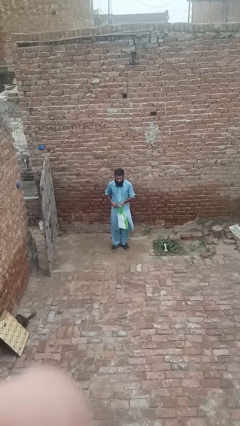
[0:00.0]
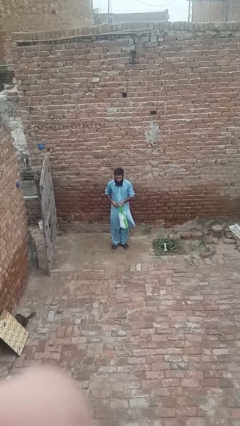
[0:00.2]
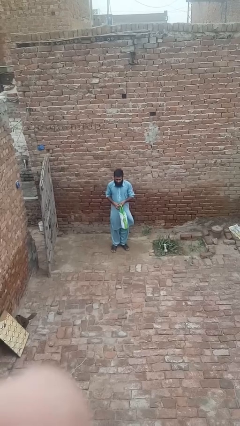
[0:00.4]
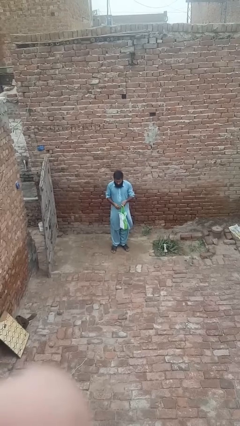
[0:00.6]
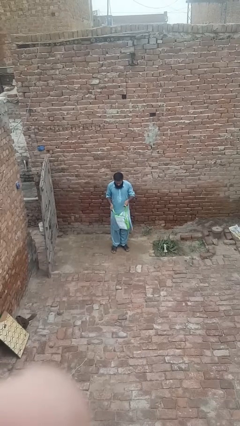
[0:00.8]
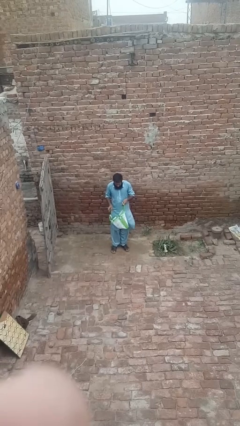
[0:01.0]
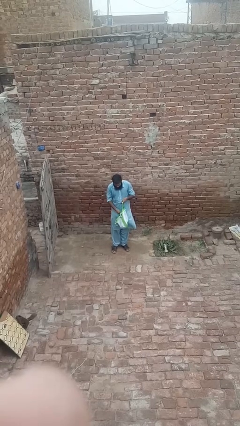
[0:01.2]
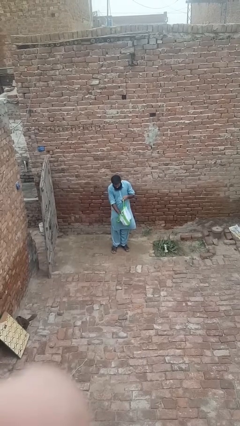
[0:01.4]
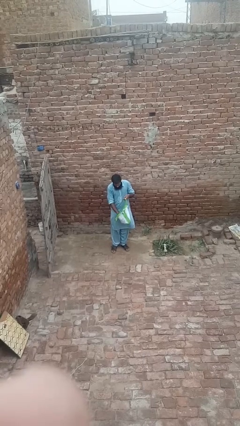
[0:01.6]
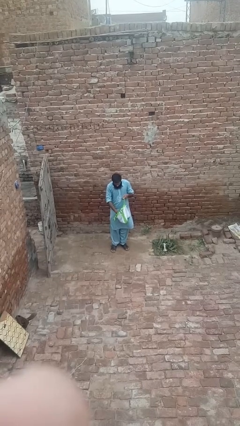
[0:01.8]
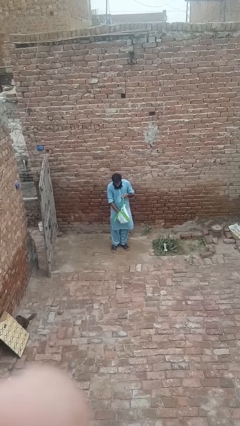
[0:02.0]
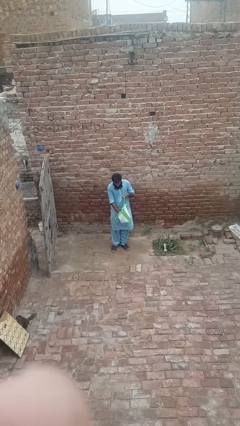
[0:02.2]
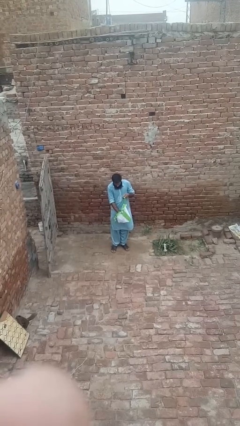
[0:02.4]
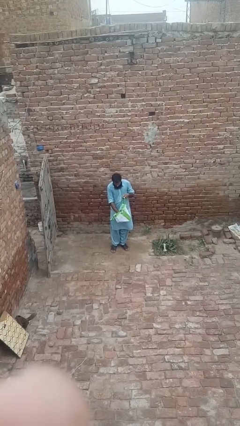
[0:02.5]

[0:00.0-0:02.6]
person searches in bag

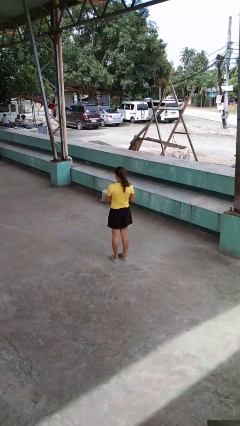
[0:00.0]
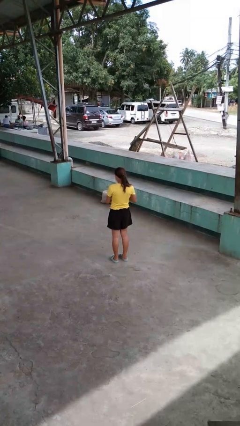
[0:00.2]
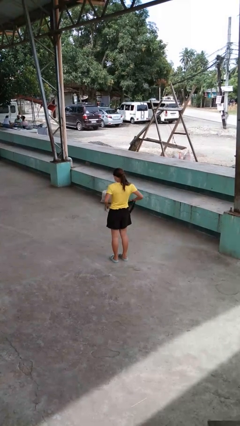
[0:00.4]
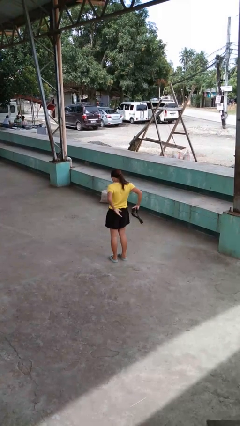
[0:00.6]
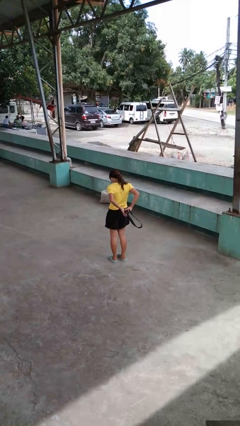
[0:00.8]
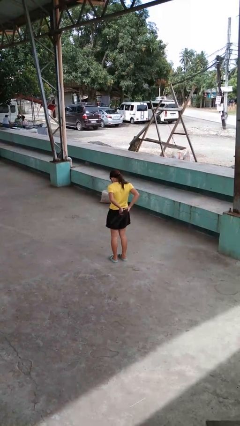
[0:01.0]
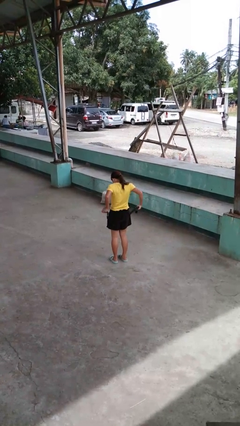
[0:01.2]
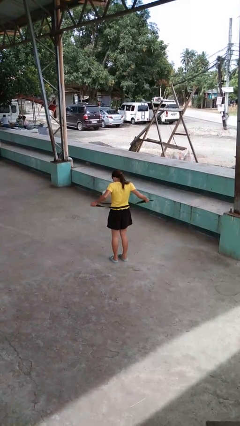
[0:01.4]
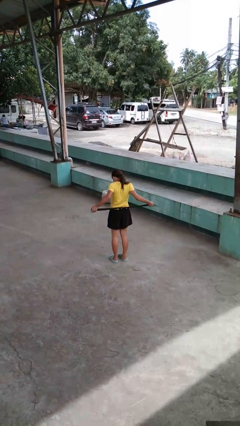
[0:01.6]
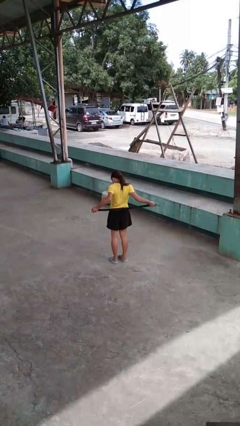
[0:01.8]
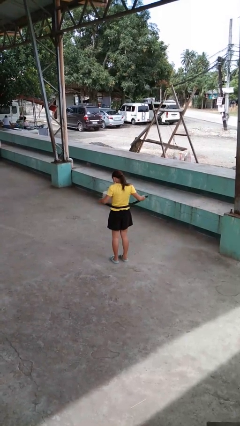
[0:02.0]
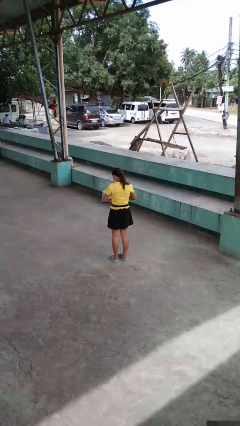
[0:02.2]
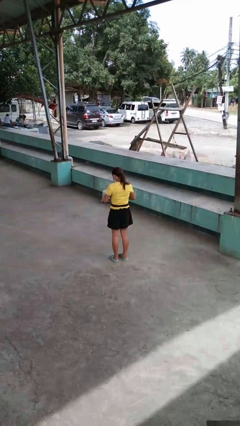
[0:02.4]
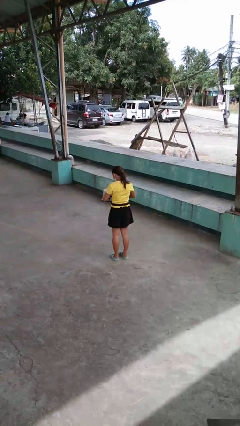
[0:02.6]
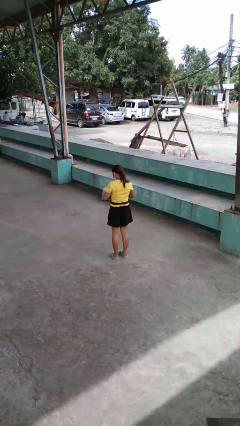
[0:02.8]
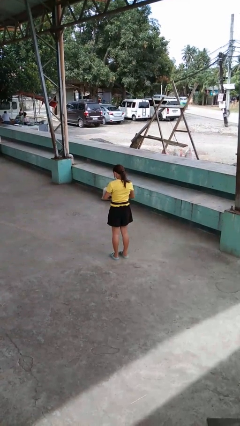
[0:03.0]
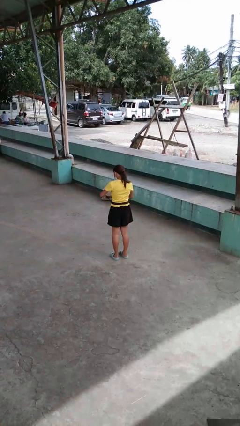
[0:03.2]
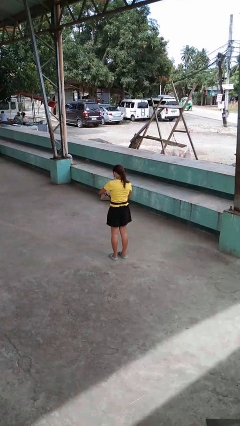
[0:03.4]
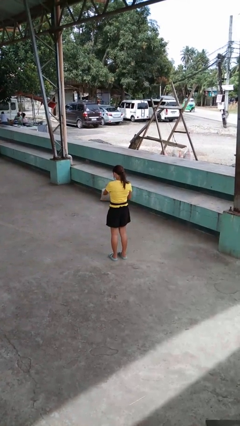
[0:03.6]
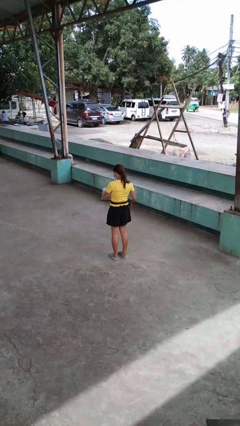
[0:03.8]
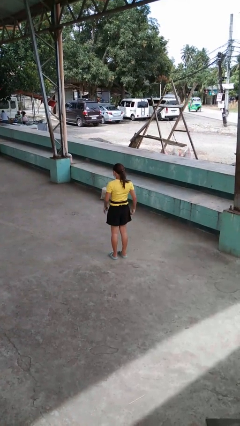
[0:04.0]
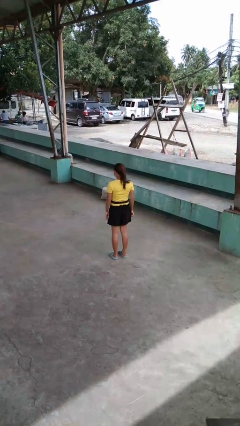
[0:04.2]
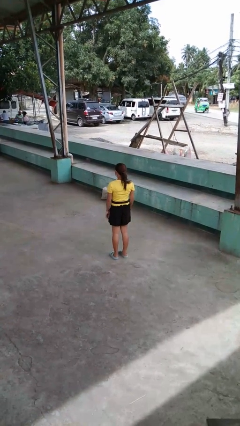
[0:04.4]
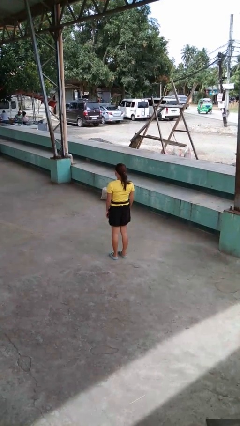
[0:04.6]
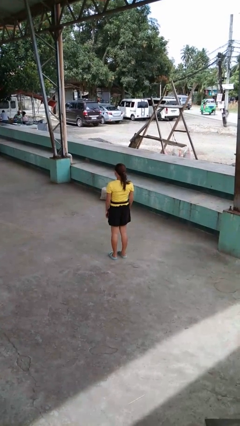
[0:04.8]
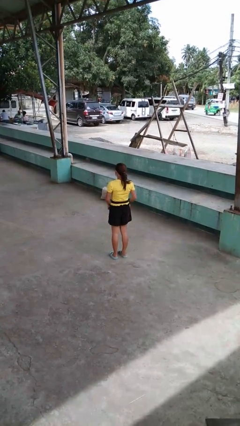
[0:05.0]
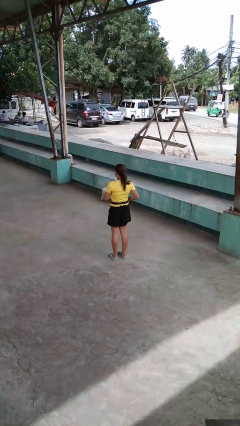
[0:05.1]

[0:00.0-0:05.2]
person puts on belt

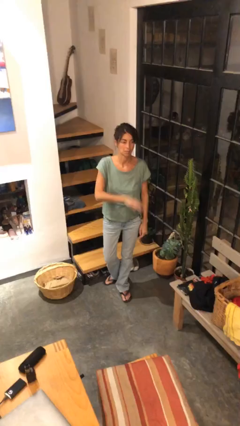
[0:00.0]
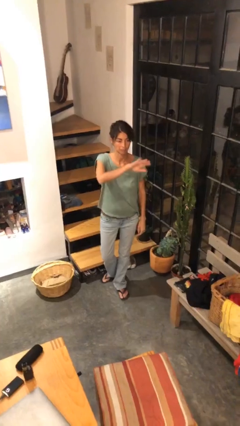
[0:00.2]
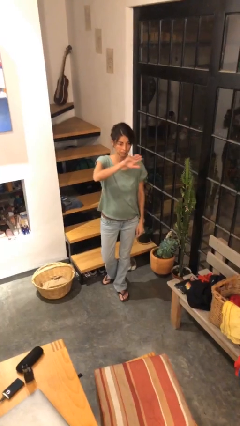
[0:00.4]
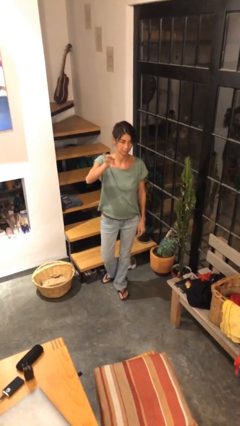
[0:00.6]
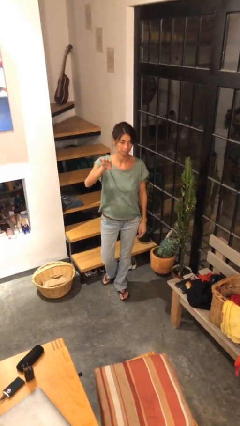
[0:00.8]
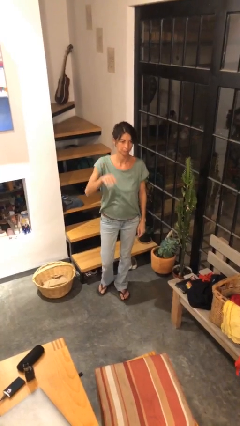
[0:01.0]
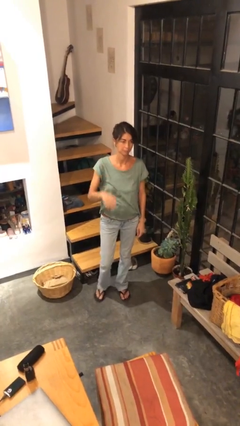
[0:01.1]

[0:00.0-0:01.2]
person gestures swipe right

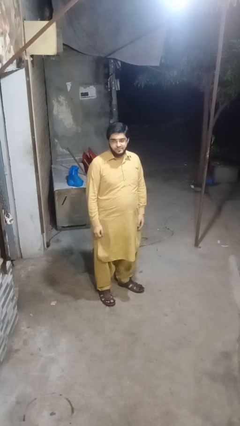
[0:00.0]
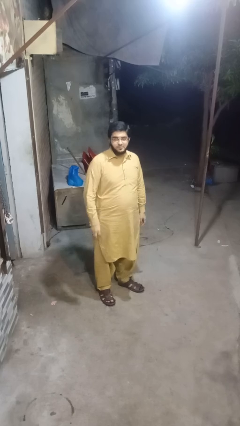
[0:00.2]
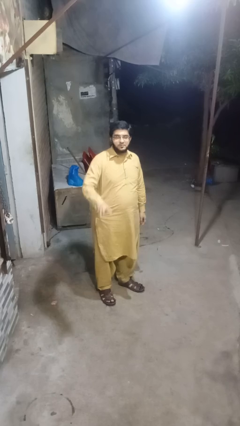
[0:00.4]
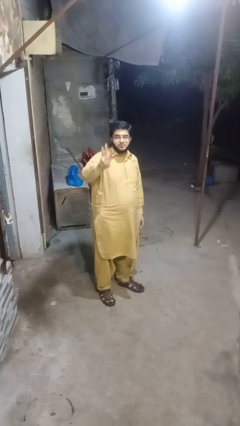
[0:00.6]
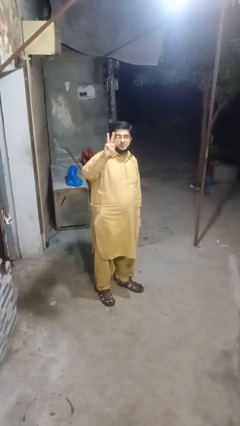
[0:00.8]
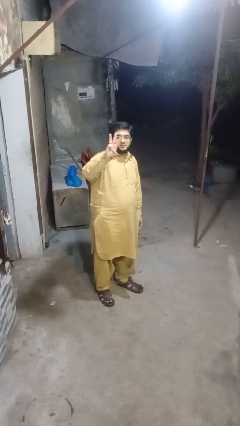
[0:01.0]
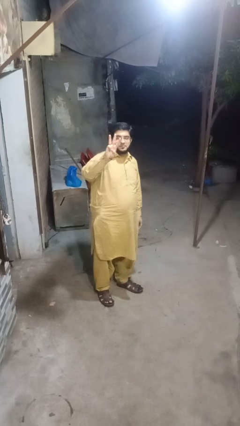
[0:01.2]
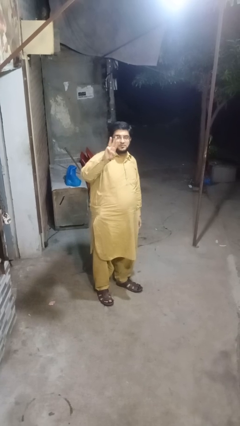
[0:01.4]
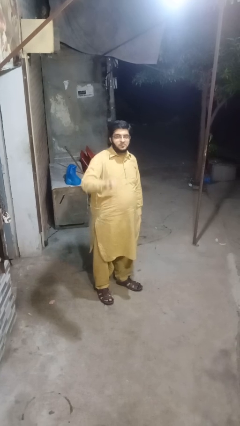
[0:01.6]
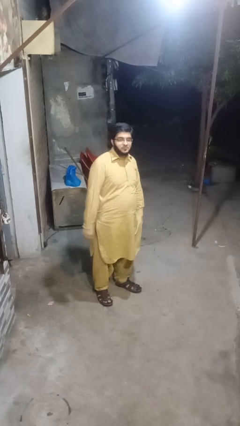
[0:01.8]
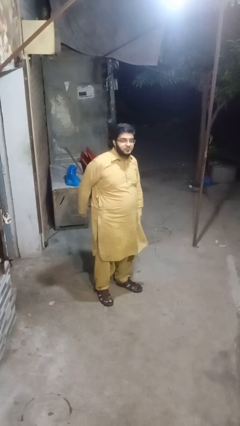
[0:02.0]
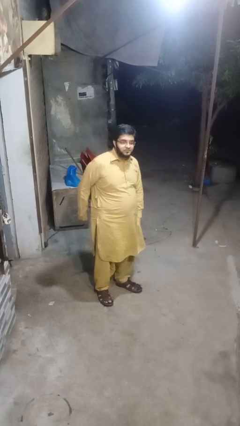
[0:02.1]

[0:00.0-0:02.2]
person gestures number three

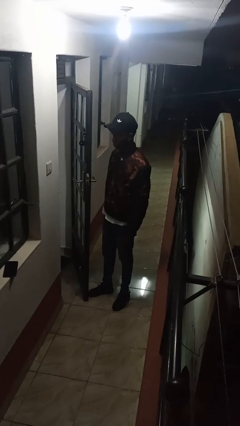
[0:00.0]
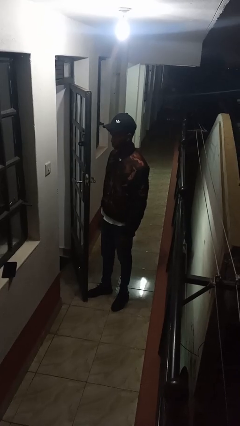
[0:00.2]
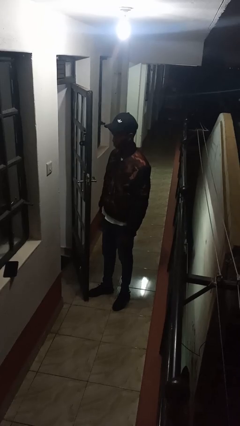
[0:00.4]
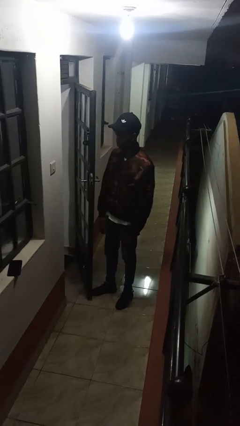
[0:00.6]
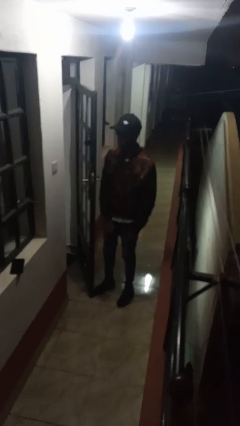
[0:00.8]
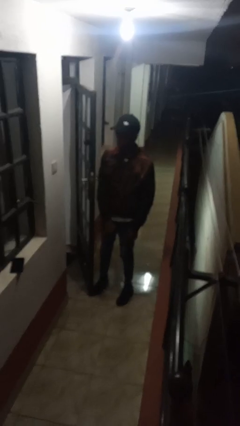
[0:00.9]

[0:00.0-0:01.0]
person opens facility door

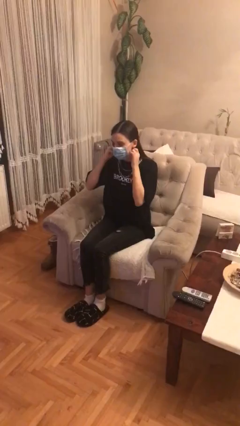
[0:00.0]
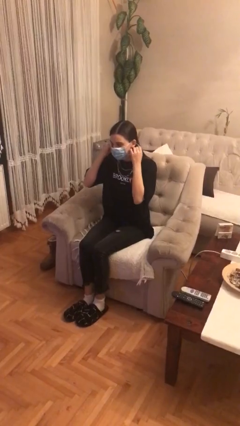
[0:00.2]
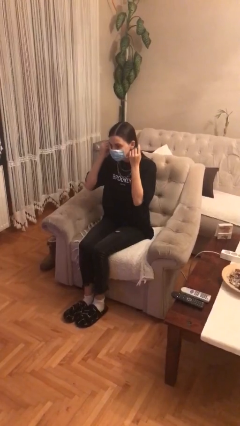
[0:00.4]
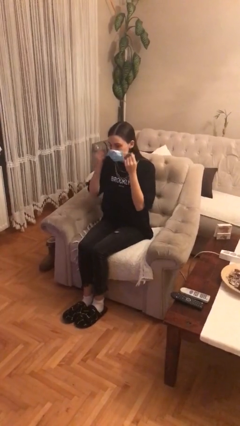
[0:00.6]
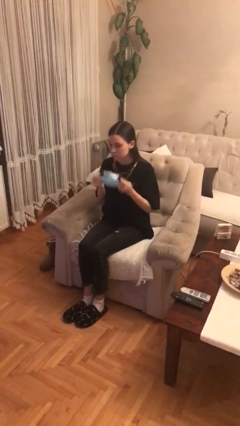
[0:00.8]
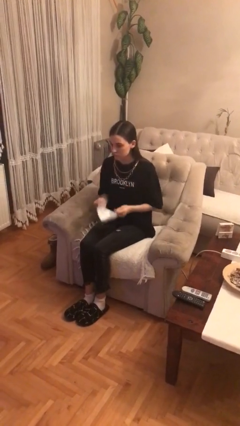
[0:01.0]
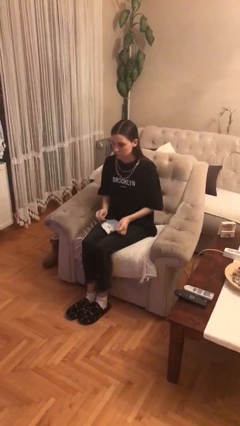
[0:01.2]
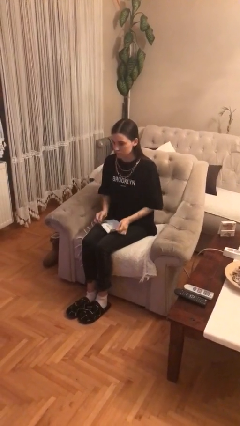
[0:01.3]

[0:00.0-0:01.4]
person takes off facemask

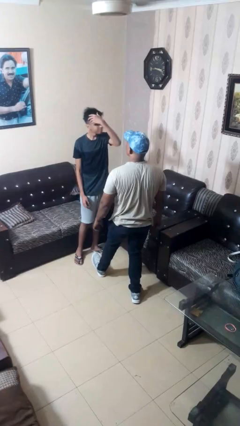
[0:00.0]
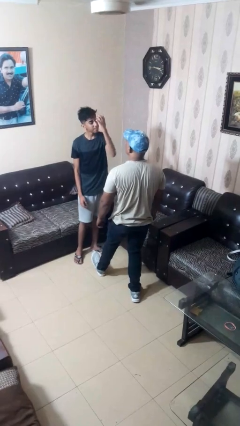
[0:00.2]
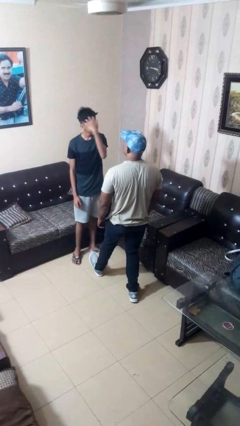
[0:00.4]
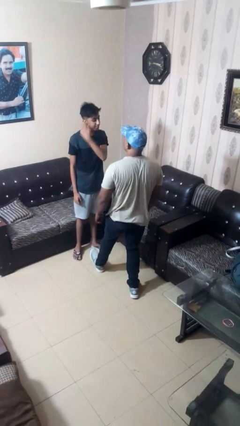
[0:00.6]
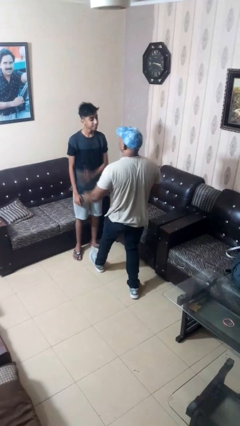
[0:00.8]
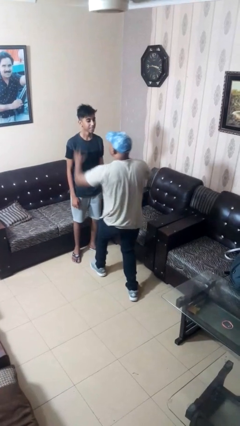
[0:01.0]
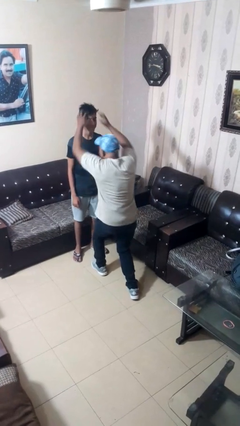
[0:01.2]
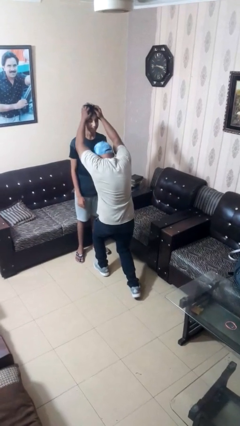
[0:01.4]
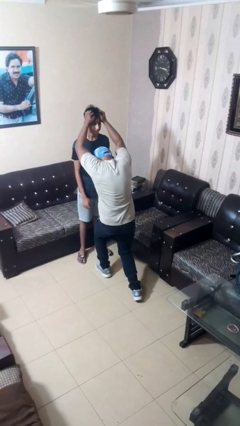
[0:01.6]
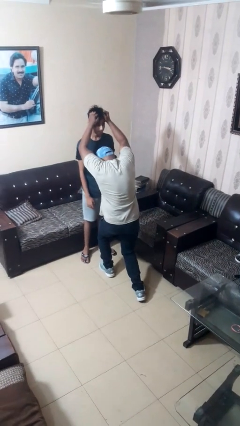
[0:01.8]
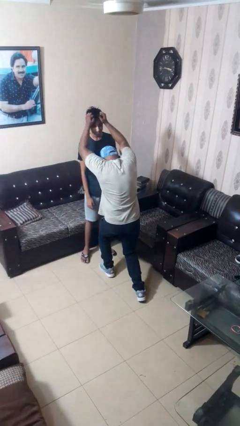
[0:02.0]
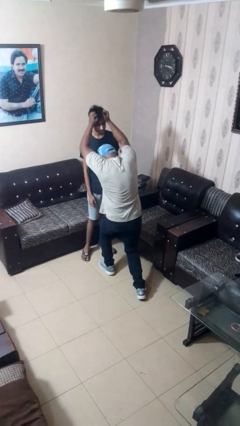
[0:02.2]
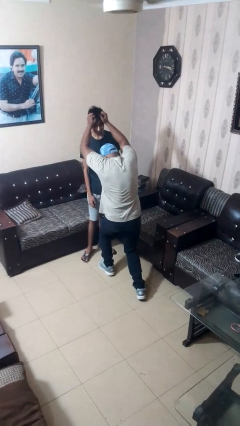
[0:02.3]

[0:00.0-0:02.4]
person grabs person by hair

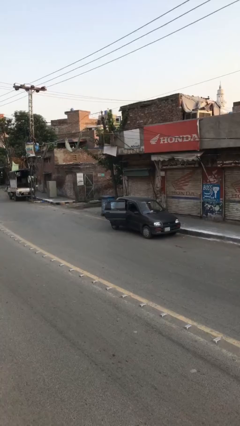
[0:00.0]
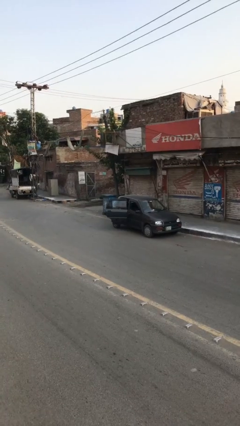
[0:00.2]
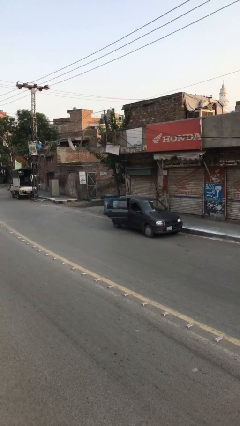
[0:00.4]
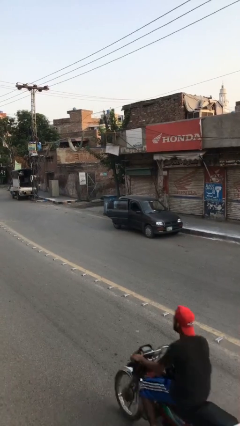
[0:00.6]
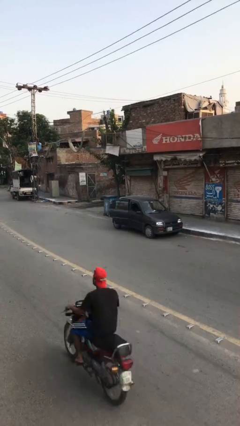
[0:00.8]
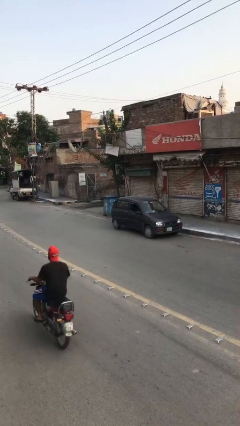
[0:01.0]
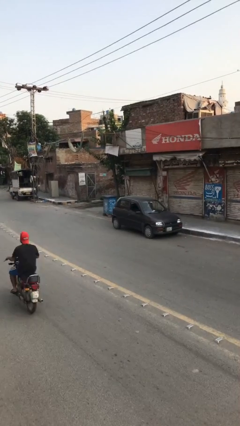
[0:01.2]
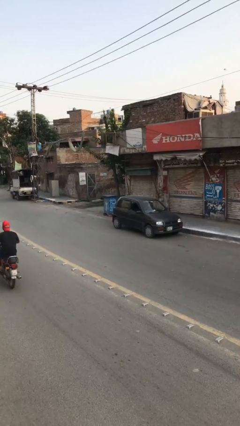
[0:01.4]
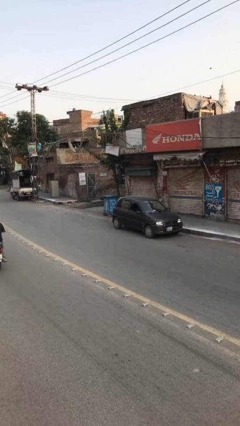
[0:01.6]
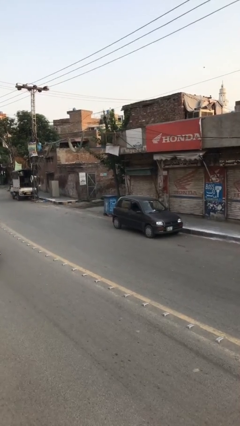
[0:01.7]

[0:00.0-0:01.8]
person closes car door
